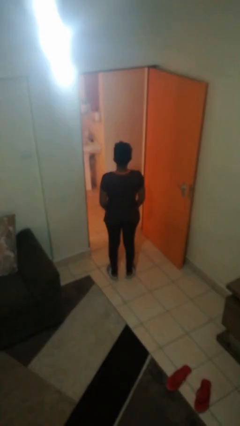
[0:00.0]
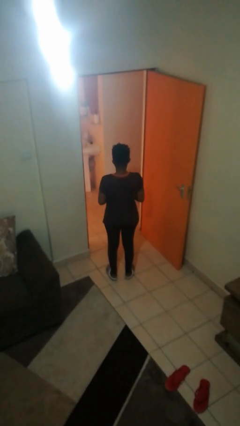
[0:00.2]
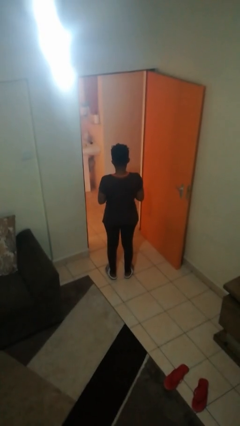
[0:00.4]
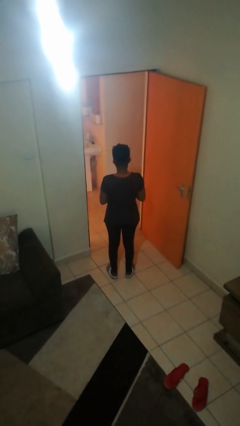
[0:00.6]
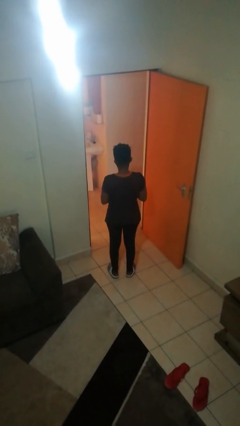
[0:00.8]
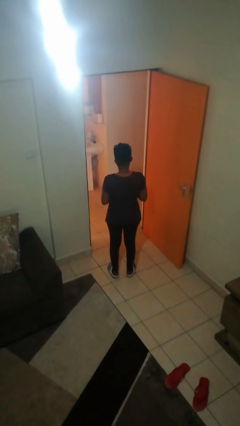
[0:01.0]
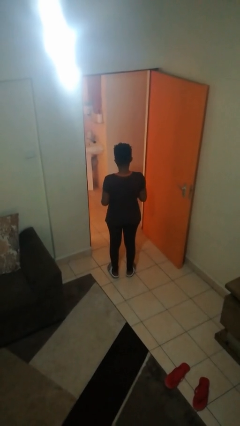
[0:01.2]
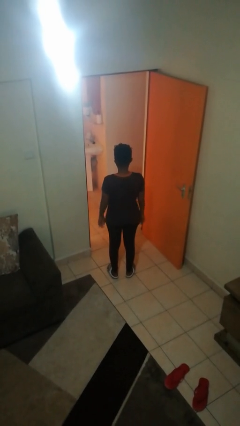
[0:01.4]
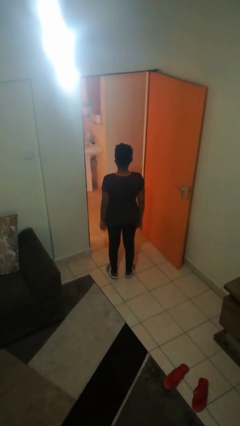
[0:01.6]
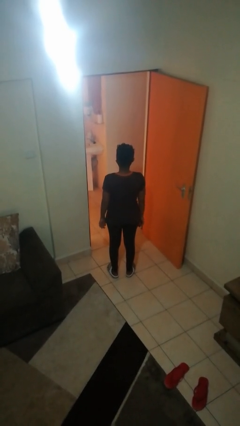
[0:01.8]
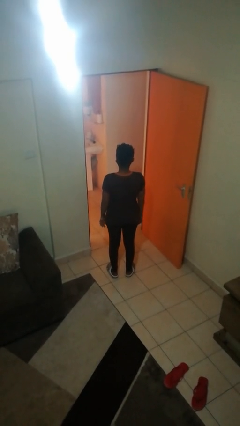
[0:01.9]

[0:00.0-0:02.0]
person puts on ring

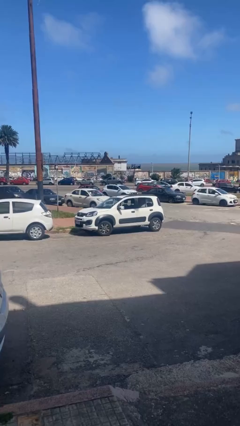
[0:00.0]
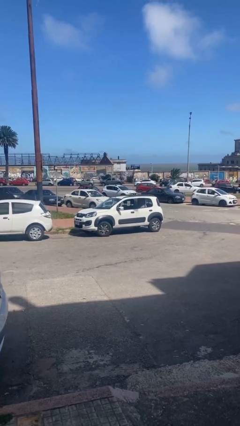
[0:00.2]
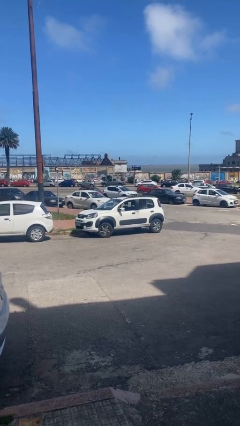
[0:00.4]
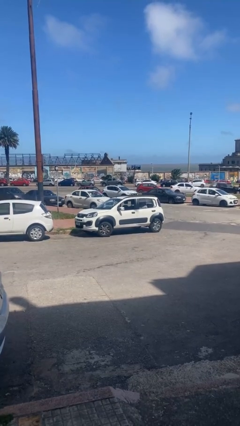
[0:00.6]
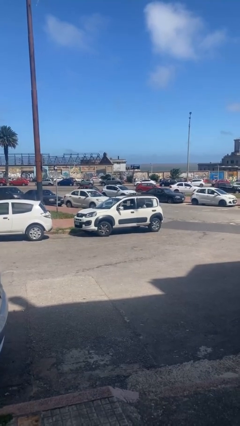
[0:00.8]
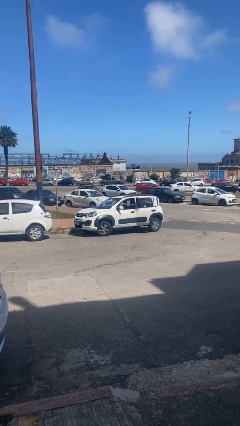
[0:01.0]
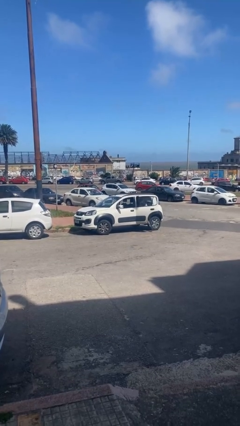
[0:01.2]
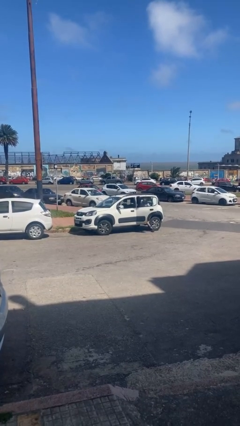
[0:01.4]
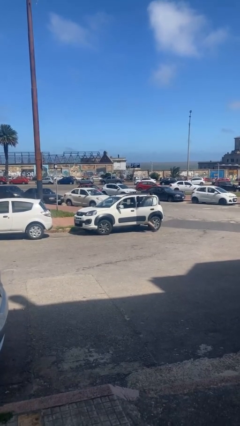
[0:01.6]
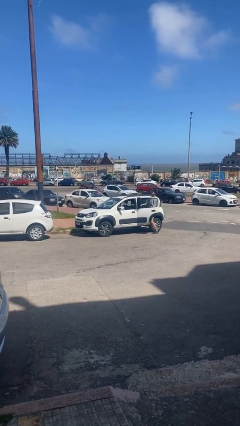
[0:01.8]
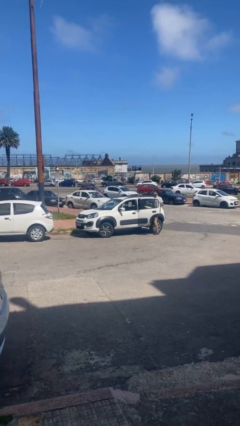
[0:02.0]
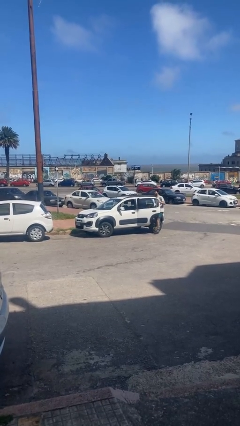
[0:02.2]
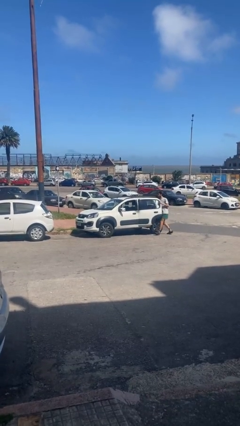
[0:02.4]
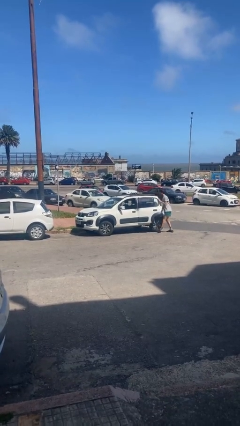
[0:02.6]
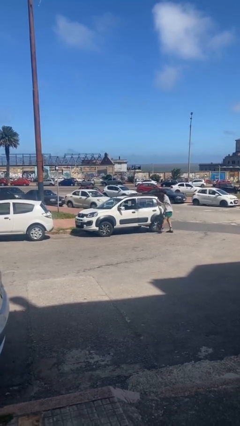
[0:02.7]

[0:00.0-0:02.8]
car drops off person

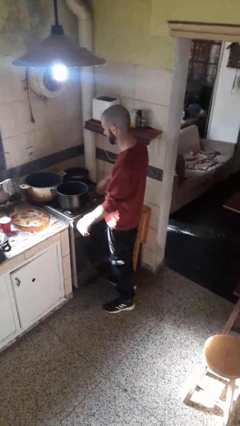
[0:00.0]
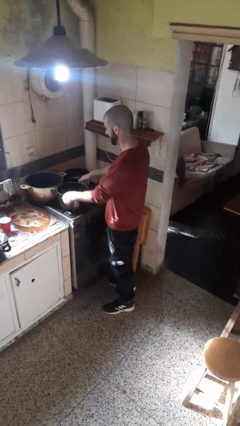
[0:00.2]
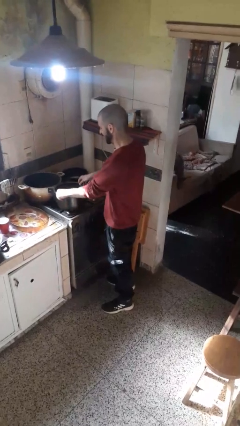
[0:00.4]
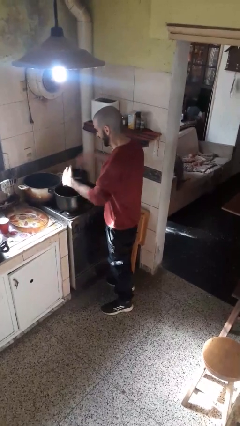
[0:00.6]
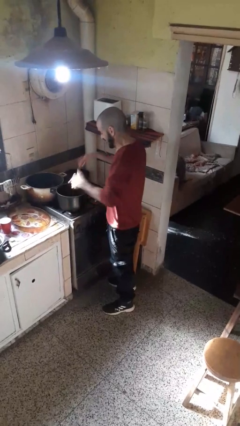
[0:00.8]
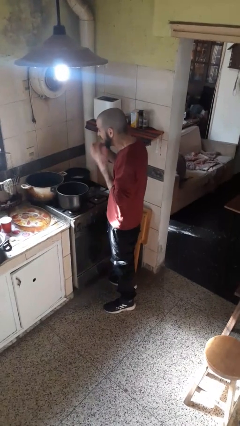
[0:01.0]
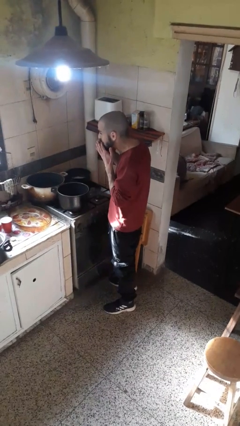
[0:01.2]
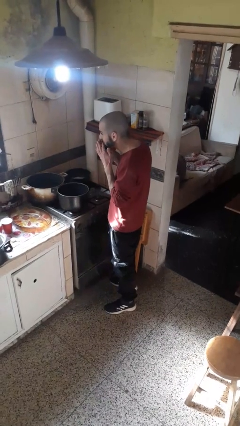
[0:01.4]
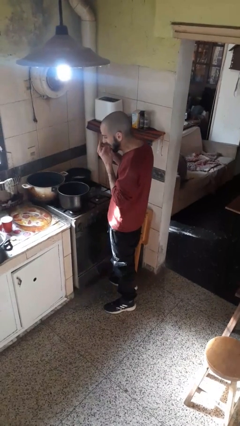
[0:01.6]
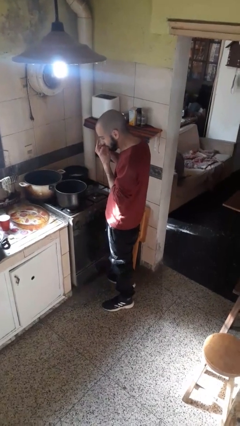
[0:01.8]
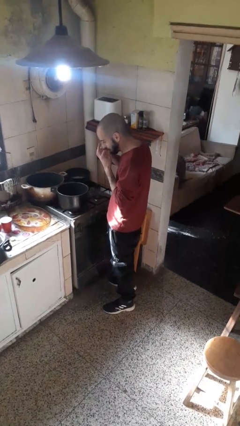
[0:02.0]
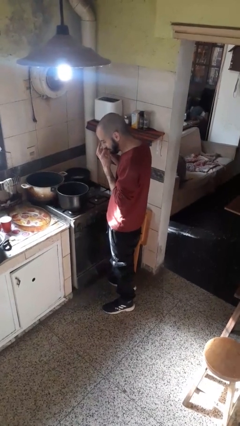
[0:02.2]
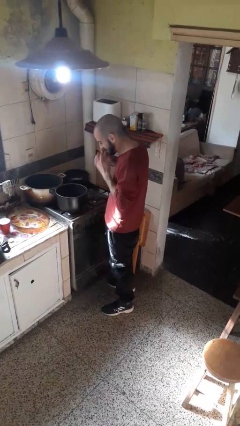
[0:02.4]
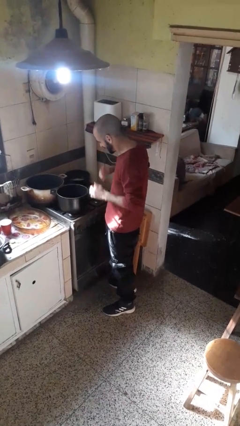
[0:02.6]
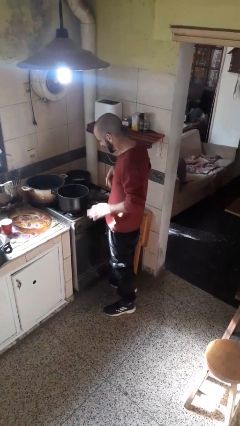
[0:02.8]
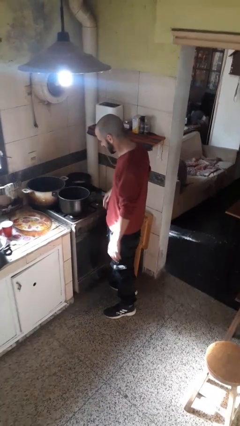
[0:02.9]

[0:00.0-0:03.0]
person burns hand

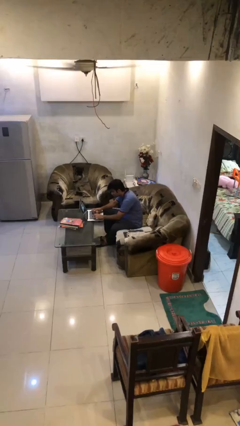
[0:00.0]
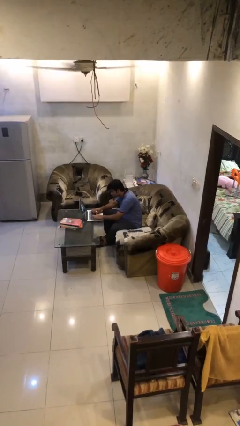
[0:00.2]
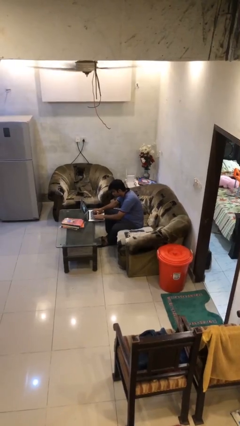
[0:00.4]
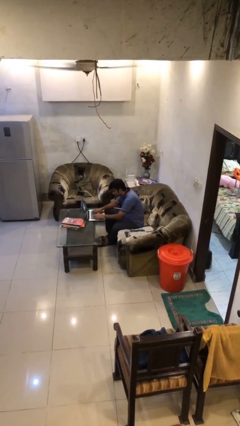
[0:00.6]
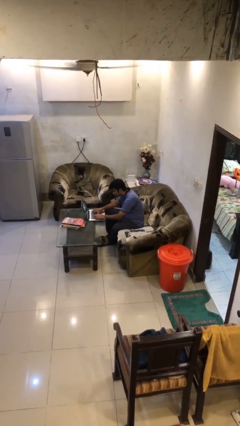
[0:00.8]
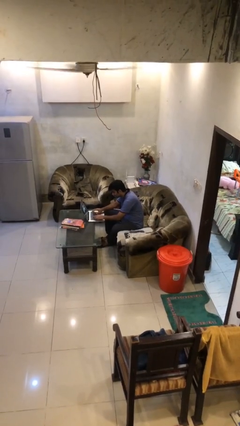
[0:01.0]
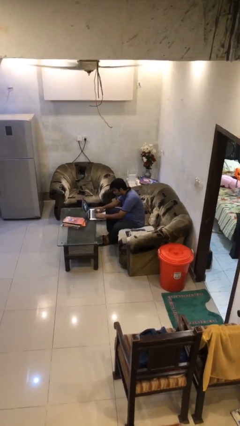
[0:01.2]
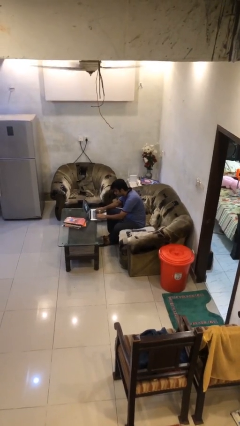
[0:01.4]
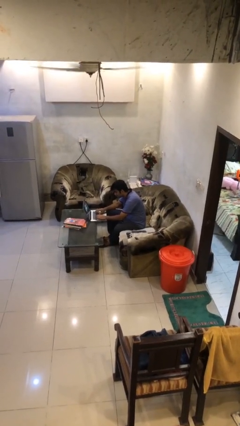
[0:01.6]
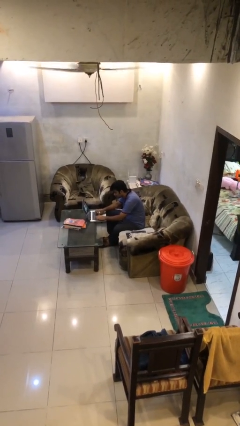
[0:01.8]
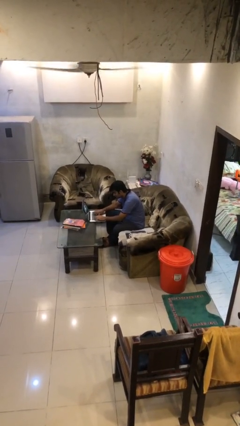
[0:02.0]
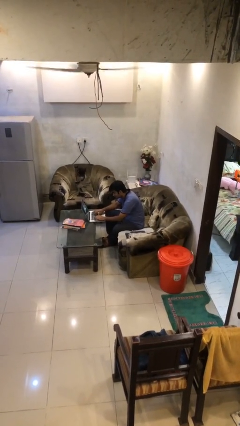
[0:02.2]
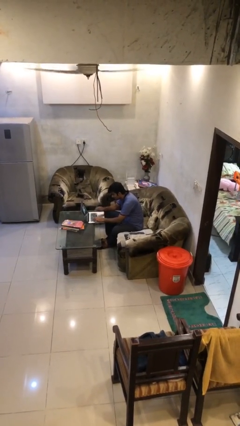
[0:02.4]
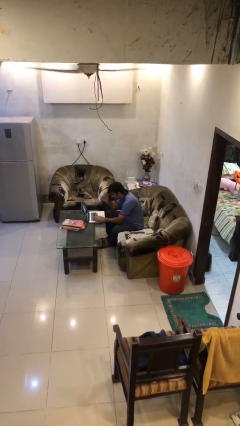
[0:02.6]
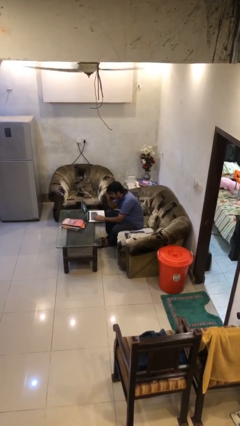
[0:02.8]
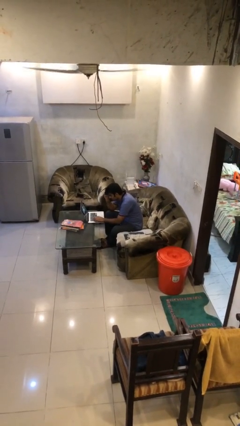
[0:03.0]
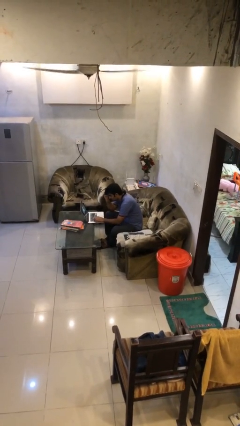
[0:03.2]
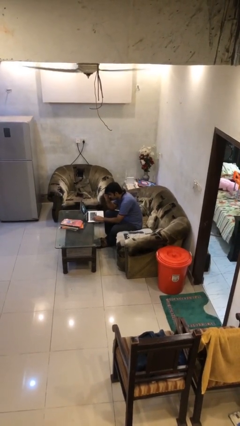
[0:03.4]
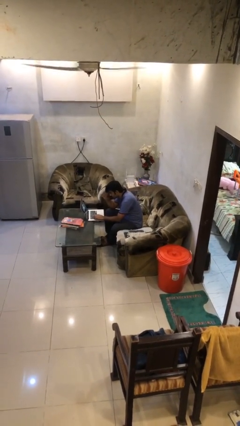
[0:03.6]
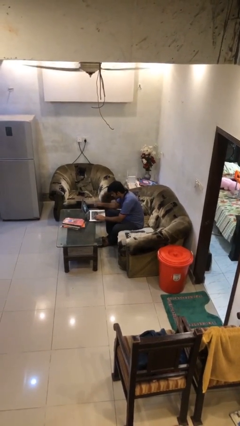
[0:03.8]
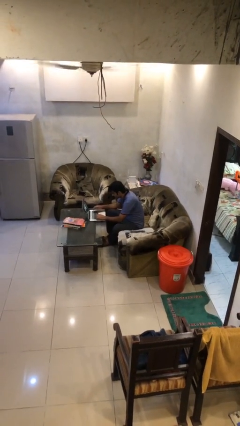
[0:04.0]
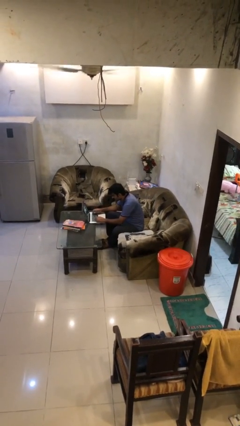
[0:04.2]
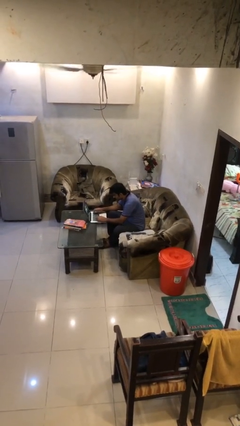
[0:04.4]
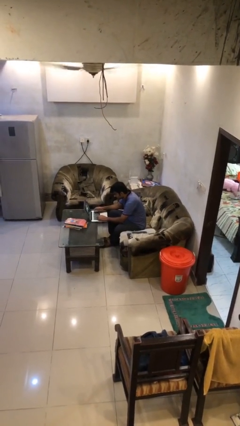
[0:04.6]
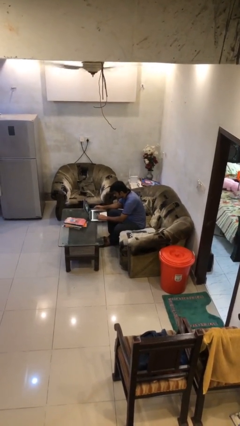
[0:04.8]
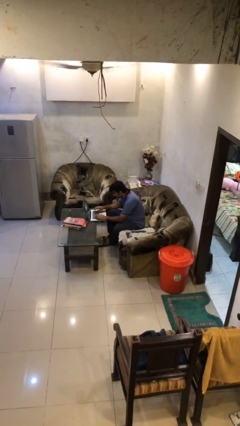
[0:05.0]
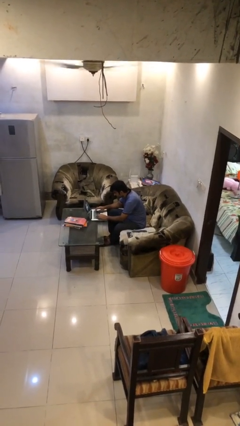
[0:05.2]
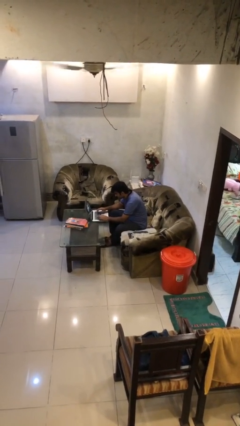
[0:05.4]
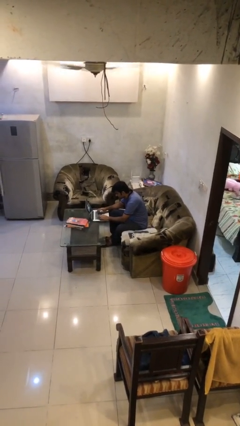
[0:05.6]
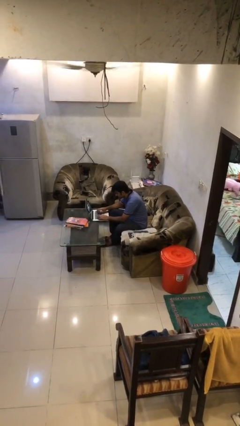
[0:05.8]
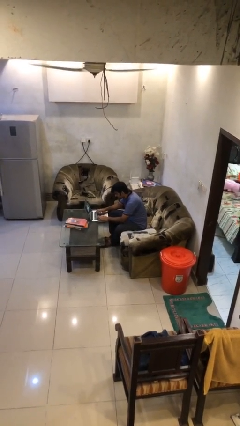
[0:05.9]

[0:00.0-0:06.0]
person interacts with laptop

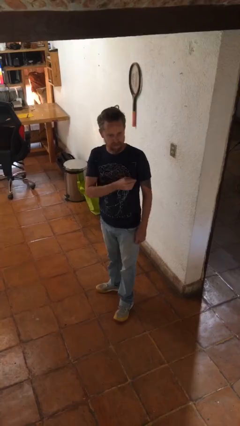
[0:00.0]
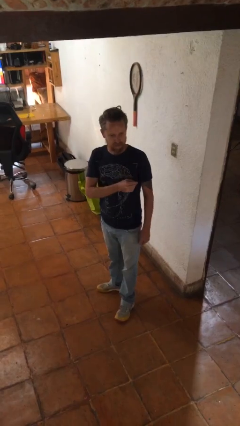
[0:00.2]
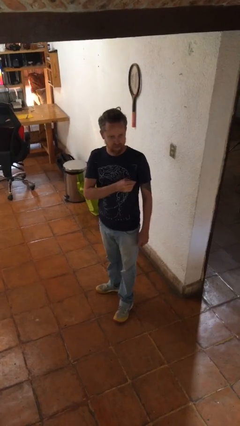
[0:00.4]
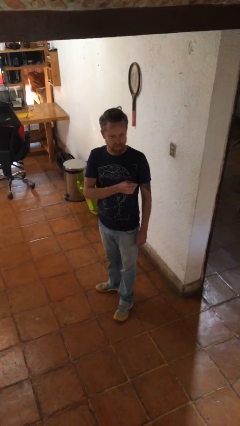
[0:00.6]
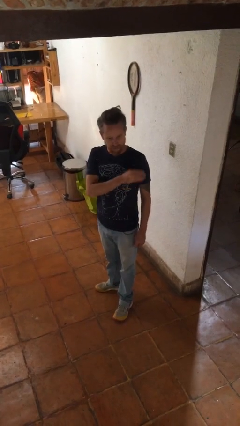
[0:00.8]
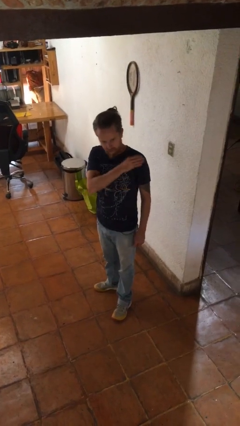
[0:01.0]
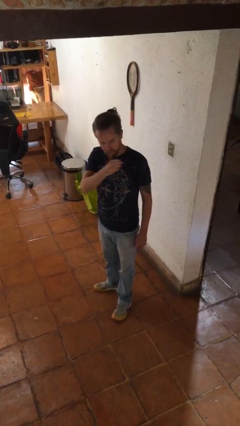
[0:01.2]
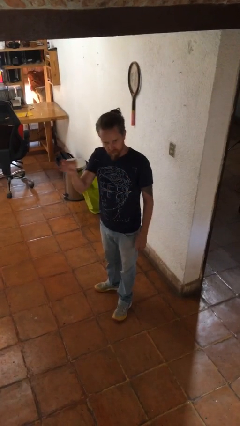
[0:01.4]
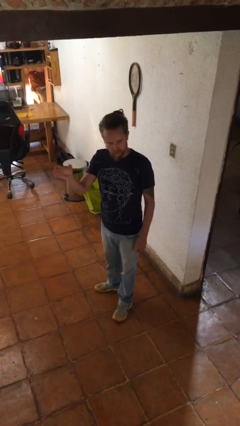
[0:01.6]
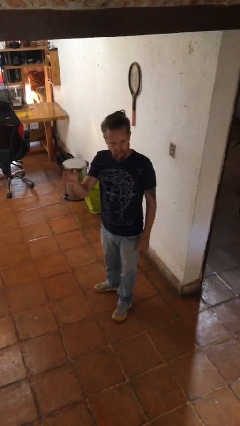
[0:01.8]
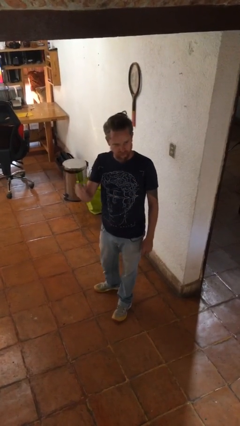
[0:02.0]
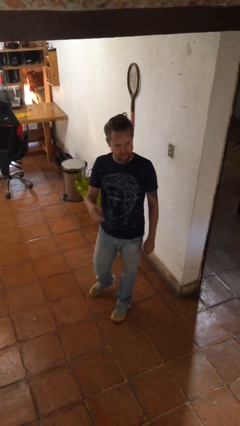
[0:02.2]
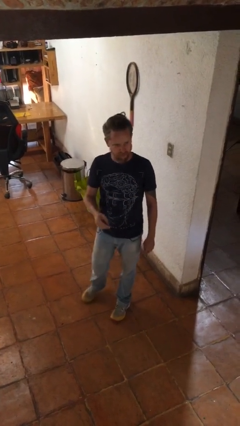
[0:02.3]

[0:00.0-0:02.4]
person gestures swipe right

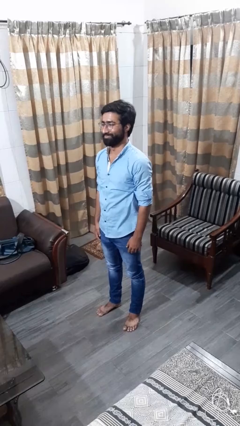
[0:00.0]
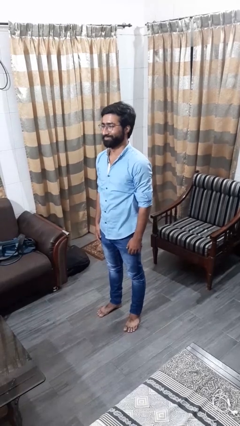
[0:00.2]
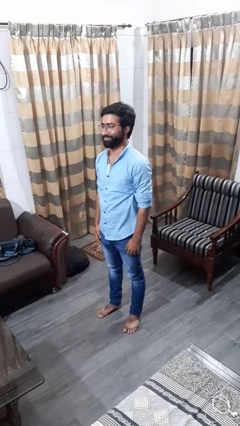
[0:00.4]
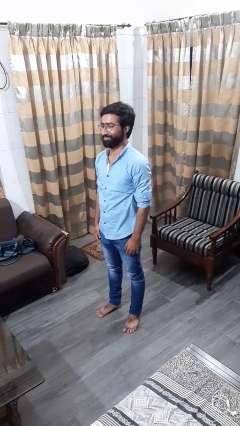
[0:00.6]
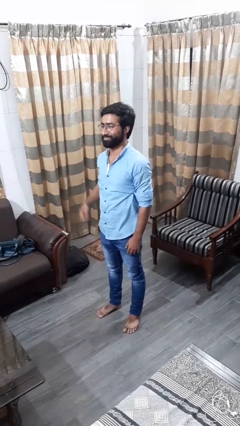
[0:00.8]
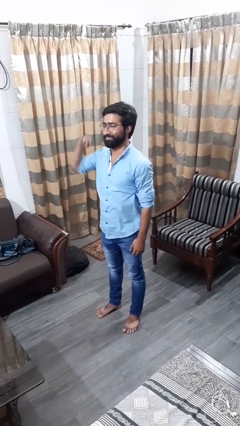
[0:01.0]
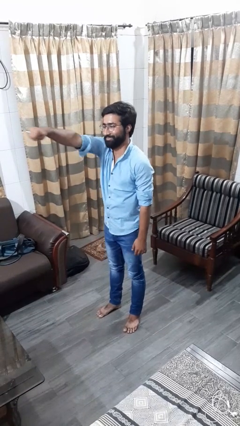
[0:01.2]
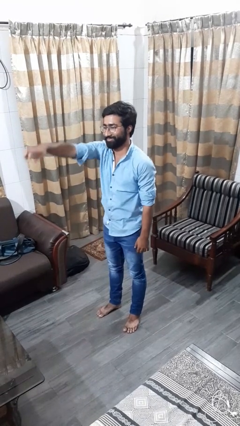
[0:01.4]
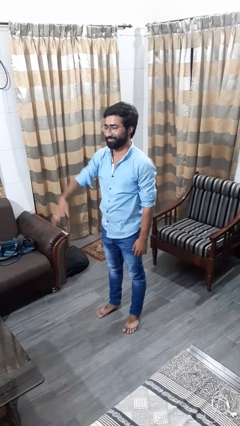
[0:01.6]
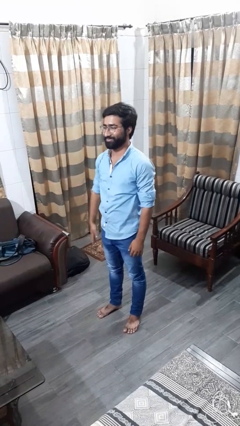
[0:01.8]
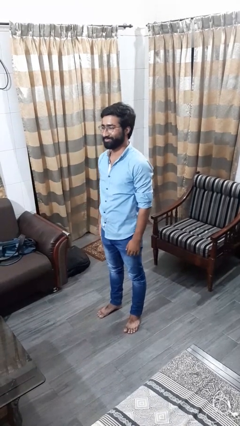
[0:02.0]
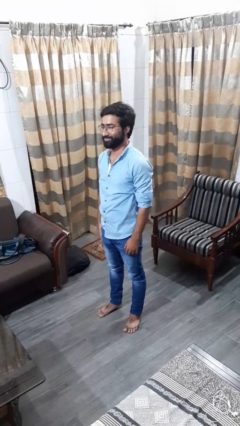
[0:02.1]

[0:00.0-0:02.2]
person punches
